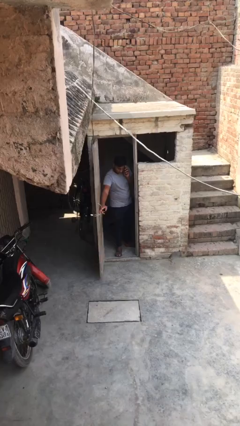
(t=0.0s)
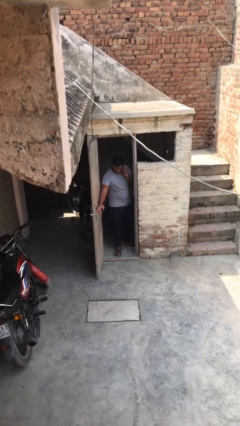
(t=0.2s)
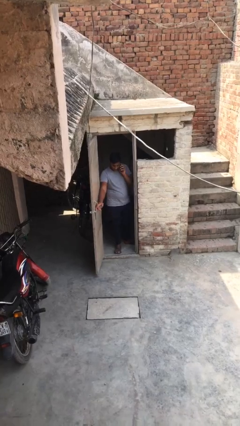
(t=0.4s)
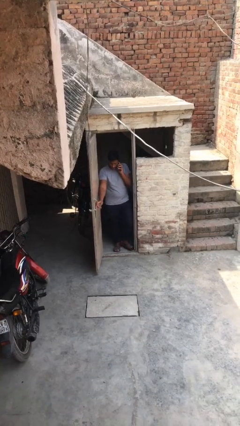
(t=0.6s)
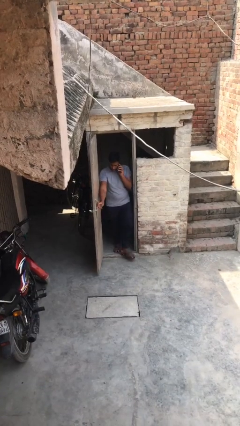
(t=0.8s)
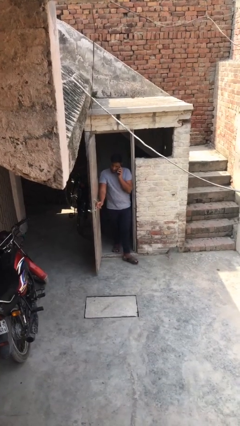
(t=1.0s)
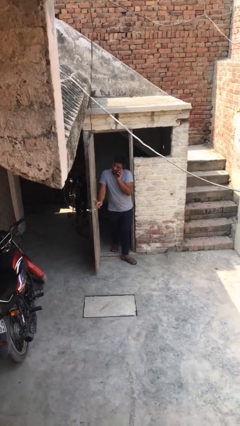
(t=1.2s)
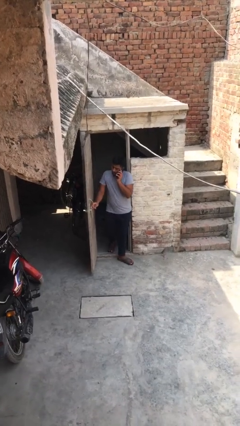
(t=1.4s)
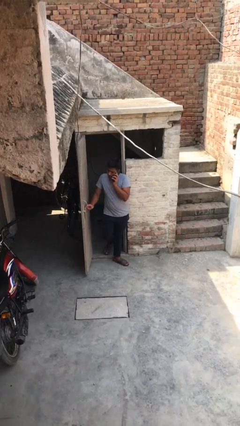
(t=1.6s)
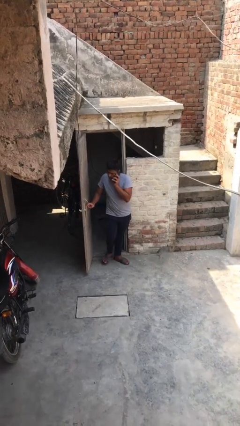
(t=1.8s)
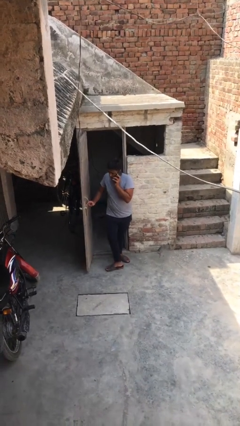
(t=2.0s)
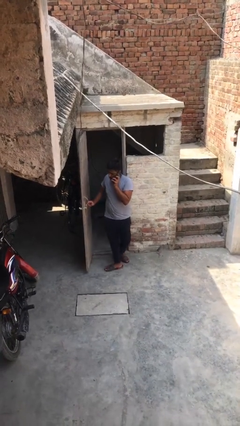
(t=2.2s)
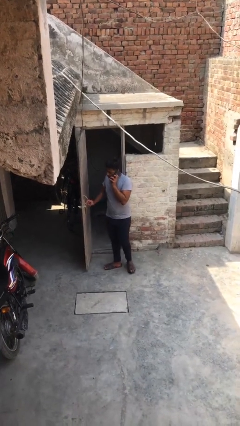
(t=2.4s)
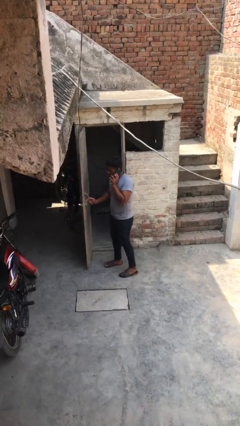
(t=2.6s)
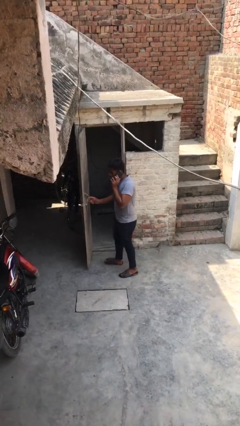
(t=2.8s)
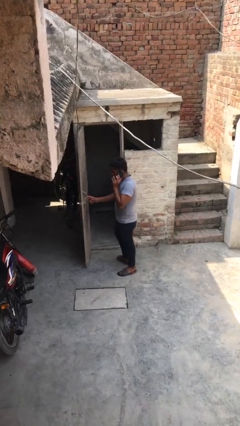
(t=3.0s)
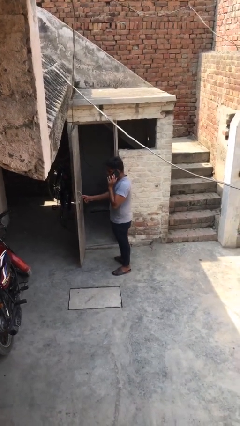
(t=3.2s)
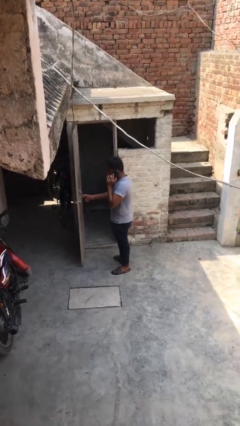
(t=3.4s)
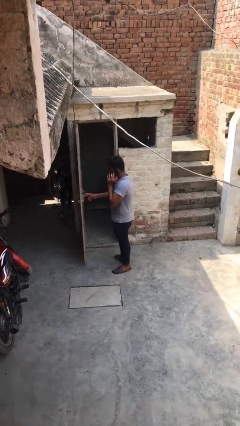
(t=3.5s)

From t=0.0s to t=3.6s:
person enters scene through structure

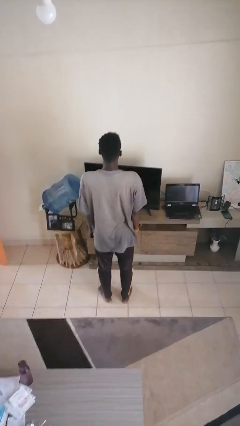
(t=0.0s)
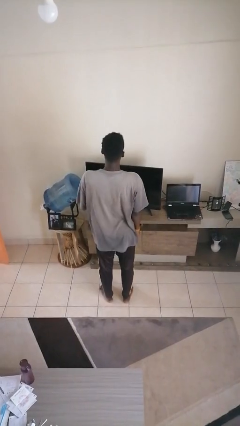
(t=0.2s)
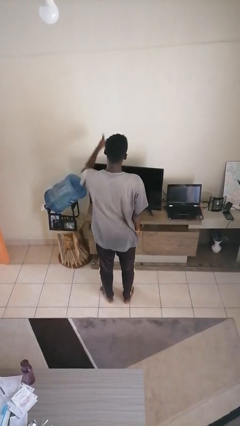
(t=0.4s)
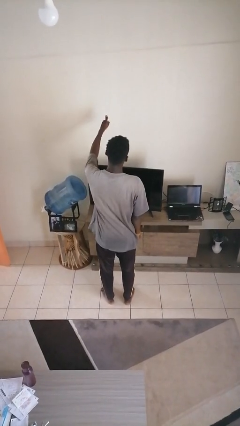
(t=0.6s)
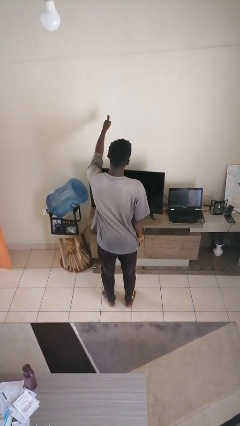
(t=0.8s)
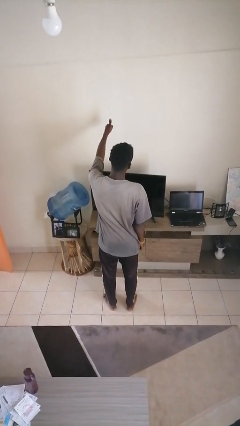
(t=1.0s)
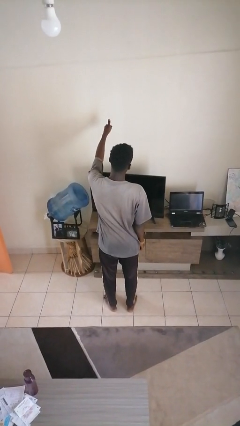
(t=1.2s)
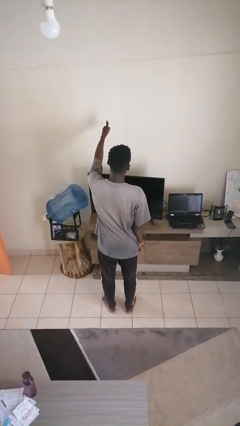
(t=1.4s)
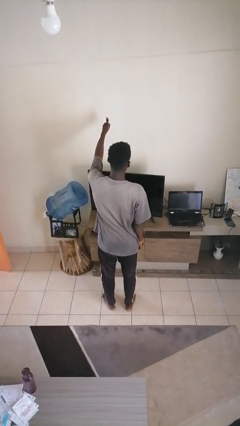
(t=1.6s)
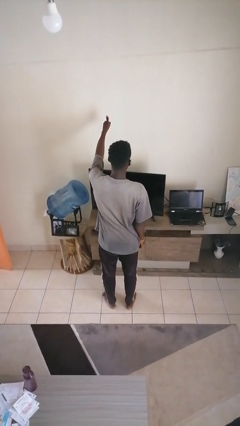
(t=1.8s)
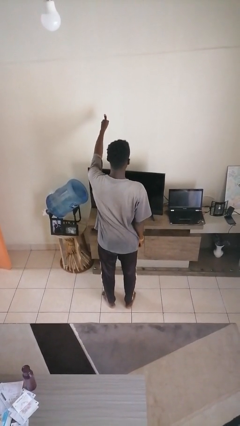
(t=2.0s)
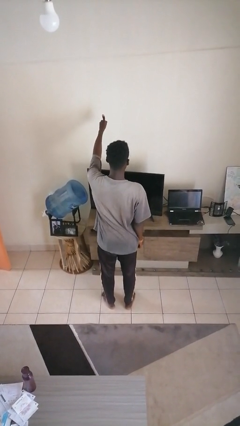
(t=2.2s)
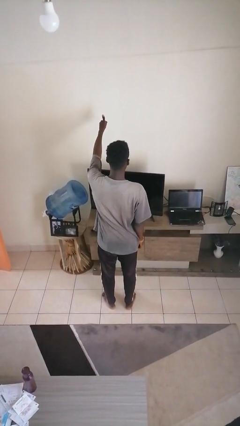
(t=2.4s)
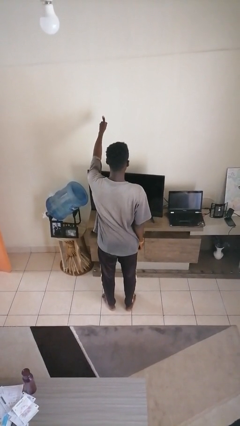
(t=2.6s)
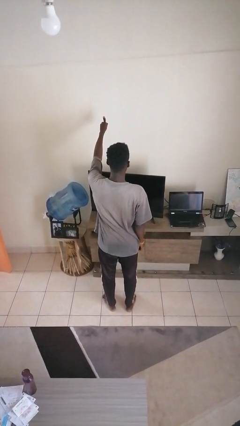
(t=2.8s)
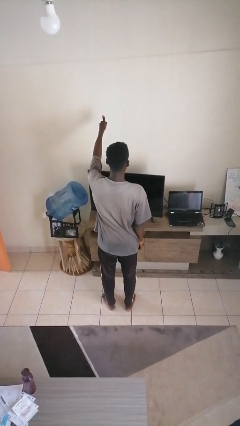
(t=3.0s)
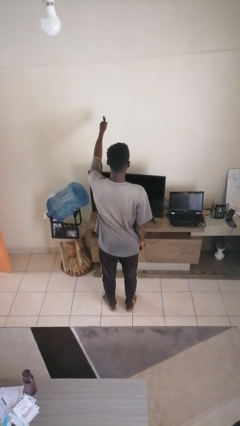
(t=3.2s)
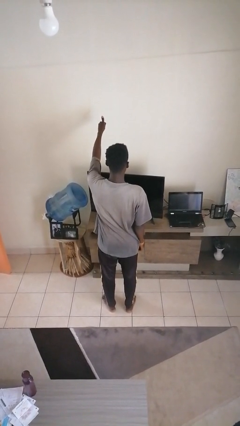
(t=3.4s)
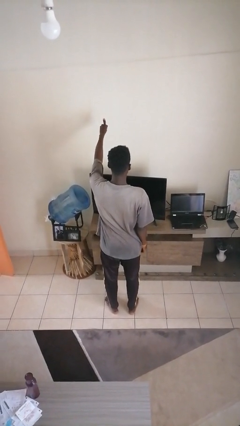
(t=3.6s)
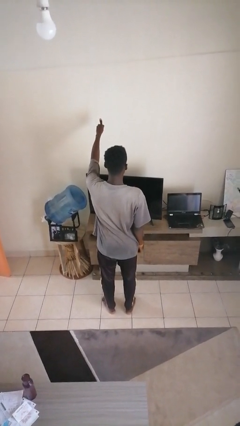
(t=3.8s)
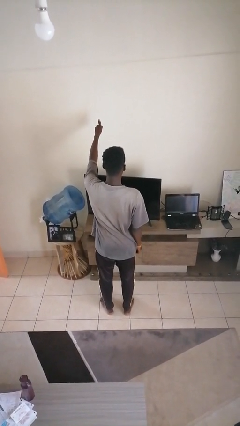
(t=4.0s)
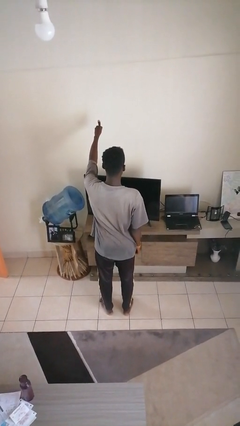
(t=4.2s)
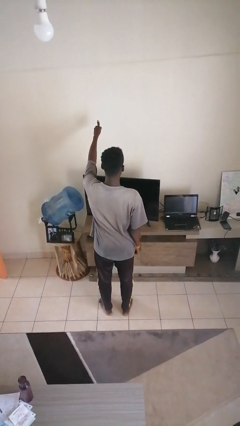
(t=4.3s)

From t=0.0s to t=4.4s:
person gestures thumbs up

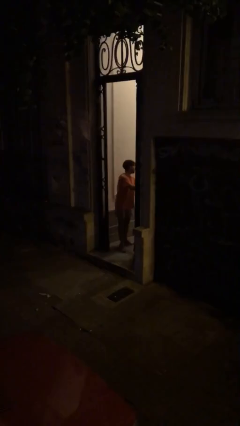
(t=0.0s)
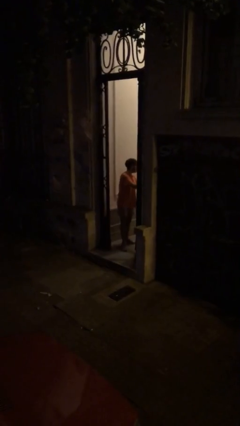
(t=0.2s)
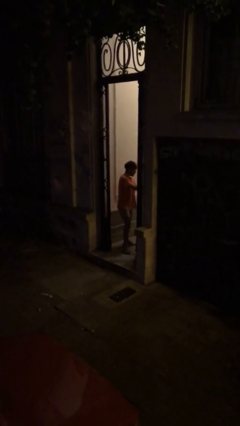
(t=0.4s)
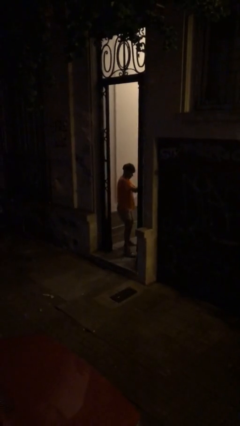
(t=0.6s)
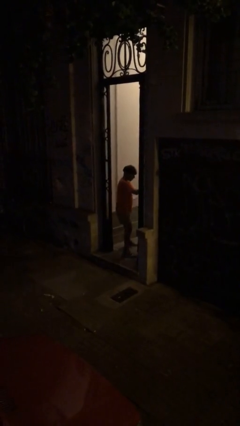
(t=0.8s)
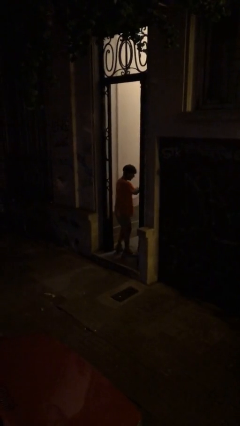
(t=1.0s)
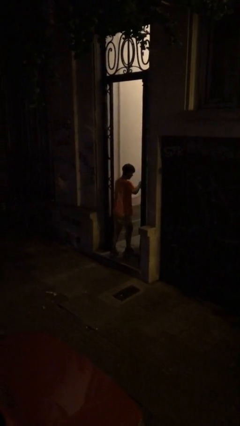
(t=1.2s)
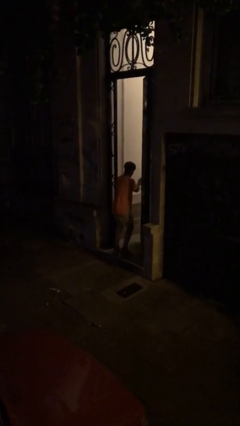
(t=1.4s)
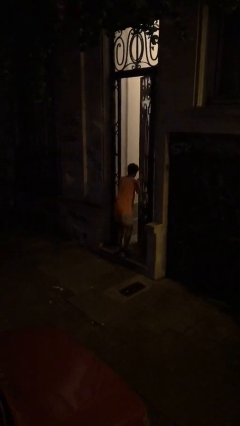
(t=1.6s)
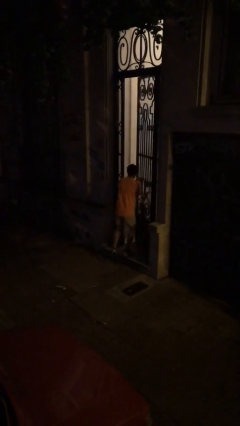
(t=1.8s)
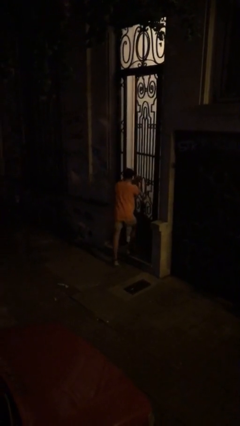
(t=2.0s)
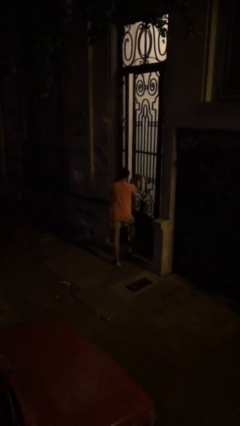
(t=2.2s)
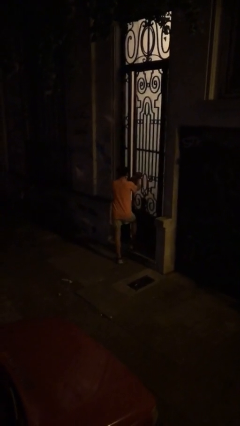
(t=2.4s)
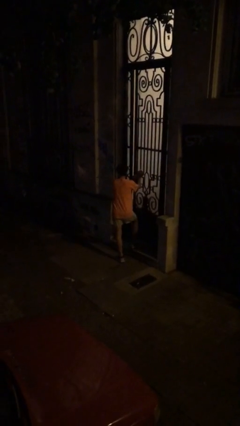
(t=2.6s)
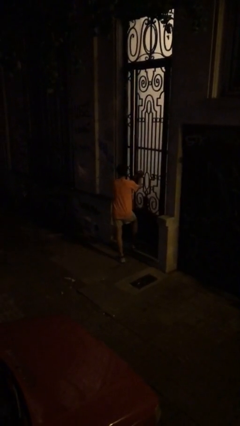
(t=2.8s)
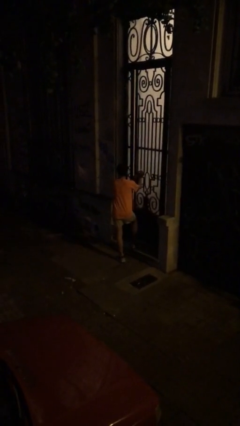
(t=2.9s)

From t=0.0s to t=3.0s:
person closes facility door

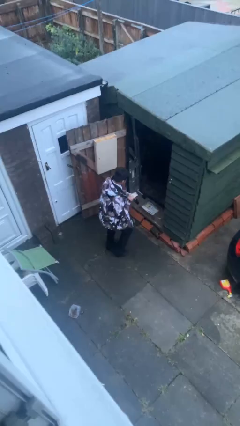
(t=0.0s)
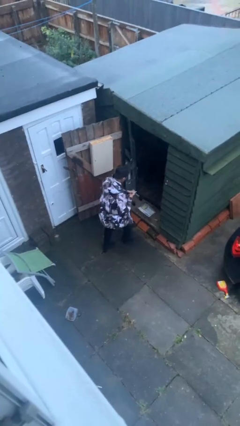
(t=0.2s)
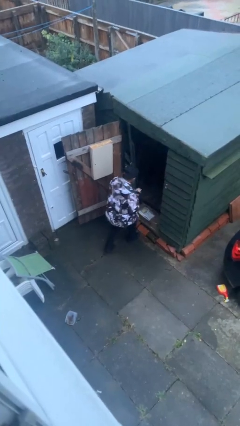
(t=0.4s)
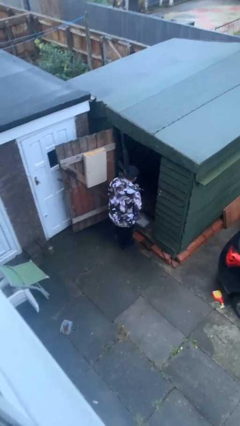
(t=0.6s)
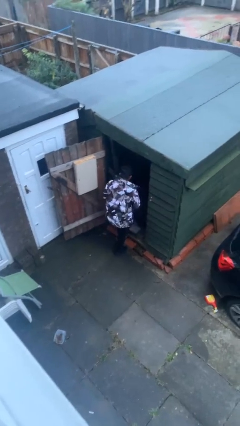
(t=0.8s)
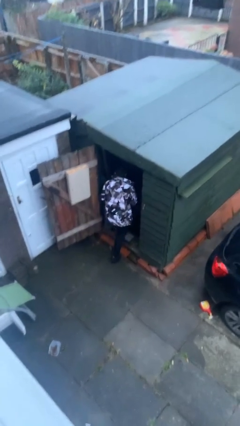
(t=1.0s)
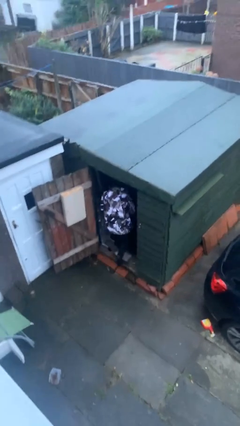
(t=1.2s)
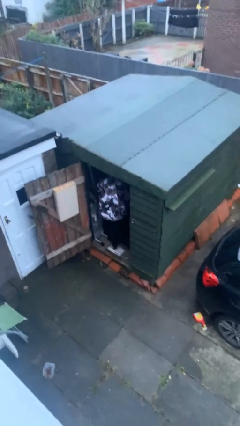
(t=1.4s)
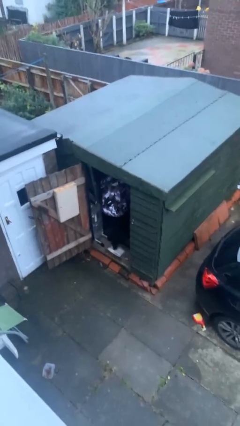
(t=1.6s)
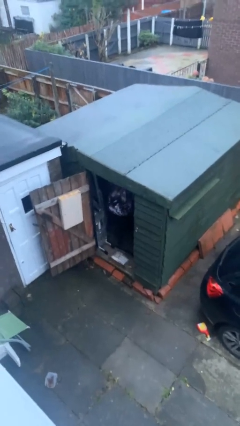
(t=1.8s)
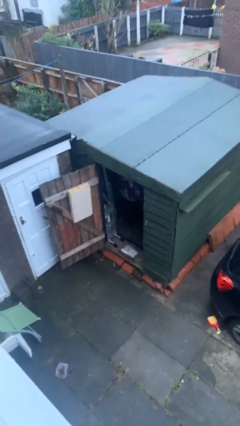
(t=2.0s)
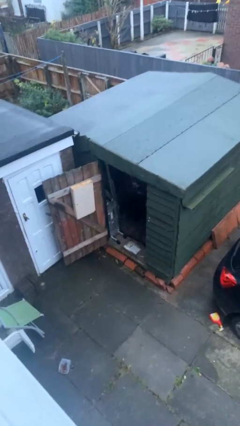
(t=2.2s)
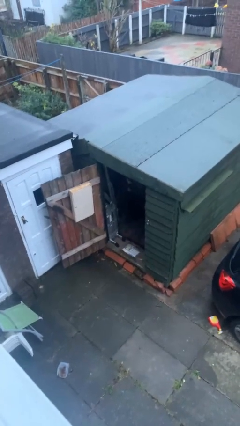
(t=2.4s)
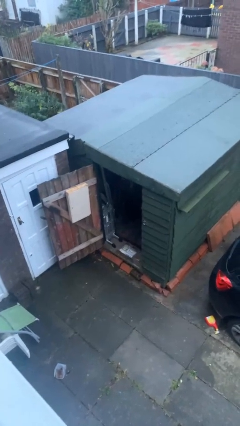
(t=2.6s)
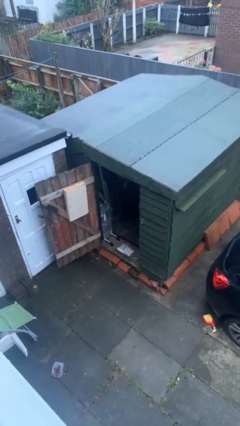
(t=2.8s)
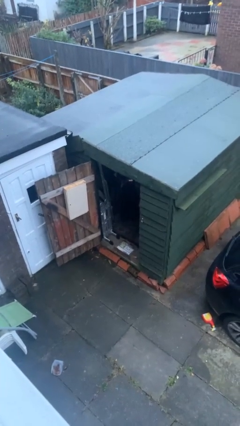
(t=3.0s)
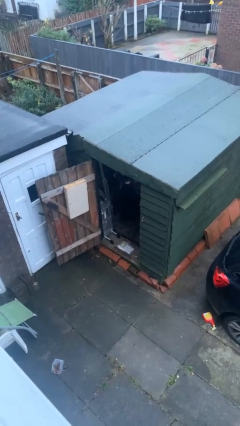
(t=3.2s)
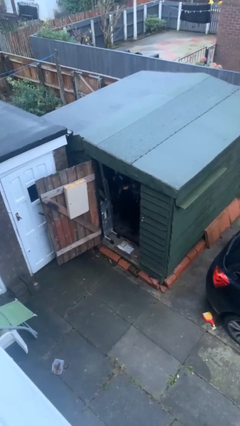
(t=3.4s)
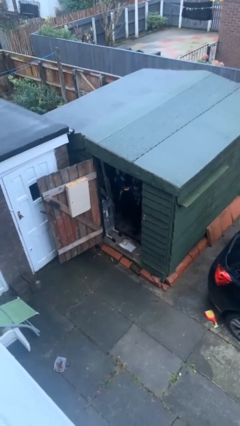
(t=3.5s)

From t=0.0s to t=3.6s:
person exits scene through structure

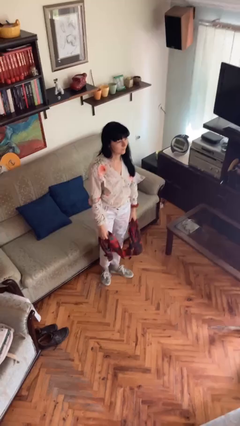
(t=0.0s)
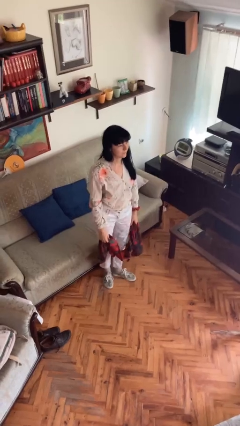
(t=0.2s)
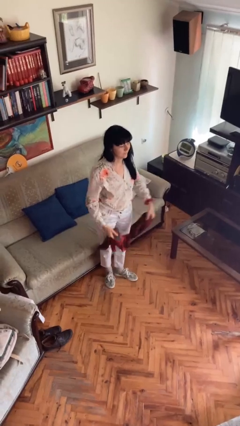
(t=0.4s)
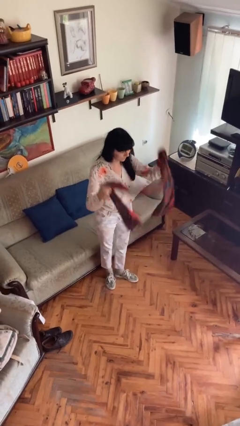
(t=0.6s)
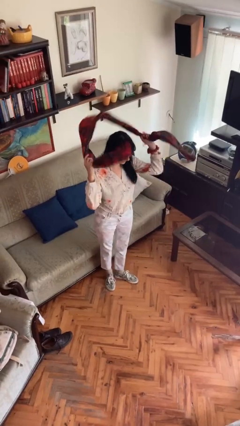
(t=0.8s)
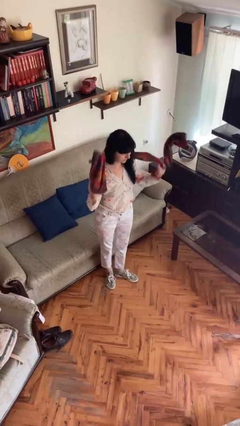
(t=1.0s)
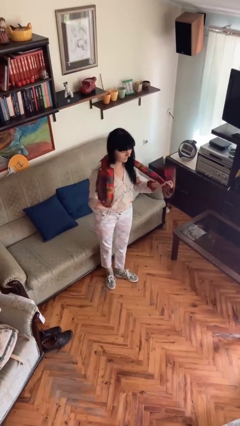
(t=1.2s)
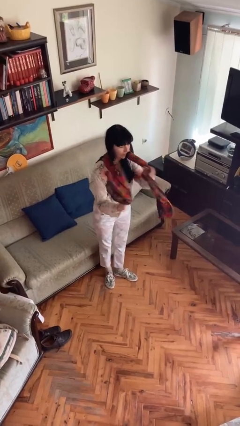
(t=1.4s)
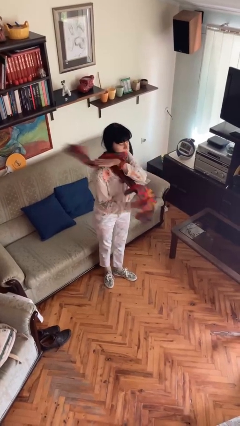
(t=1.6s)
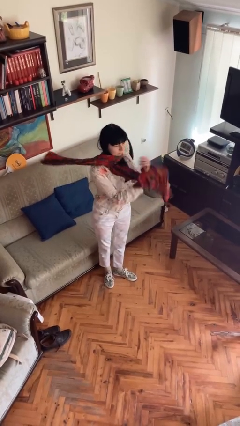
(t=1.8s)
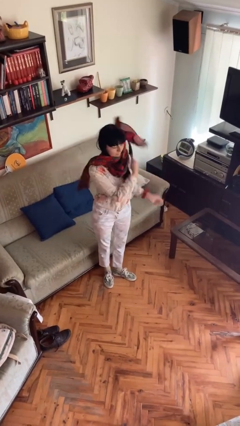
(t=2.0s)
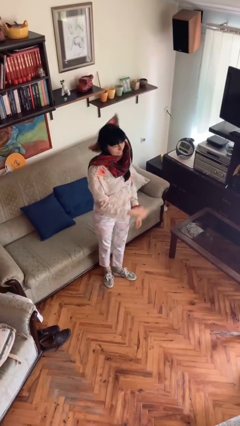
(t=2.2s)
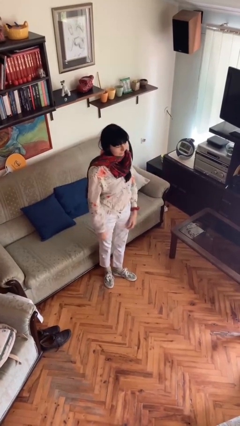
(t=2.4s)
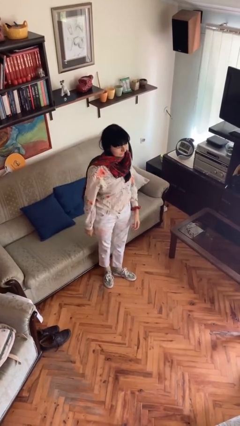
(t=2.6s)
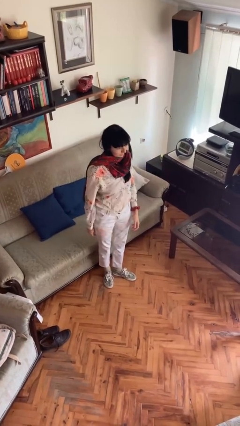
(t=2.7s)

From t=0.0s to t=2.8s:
person puts on scarf
